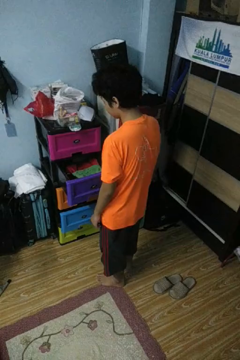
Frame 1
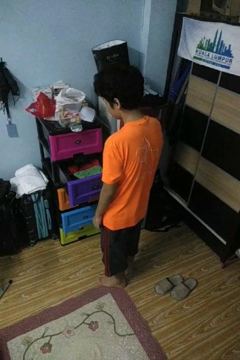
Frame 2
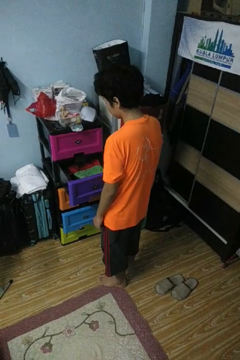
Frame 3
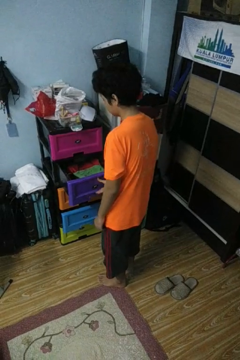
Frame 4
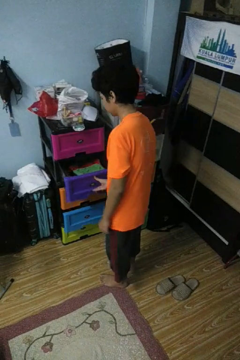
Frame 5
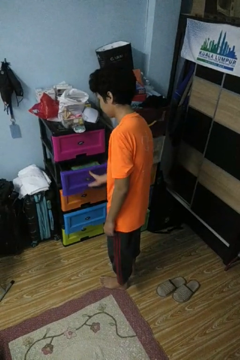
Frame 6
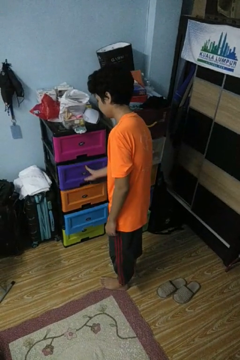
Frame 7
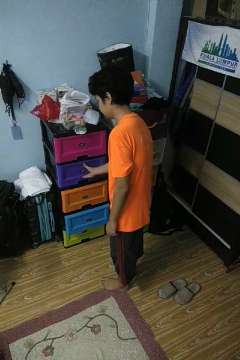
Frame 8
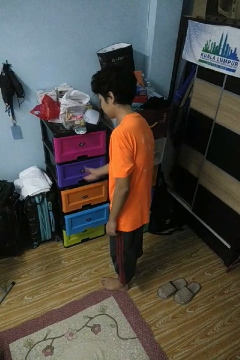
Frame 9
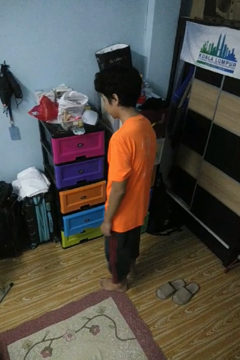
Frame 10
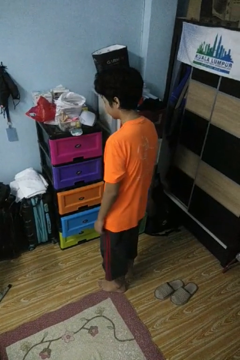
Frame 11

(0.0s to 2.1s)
person closes dresser drawer

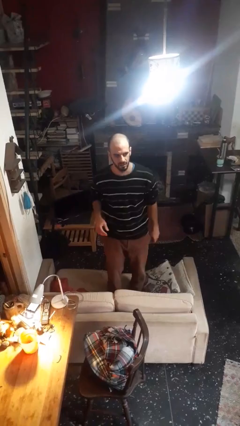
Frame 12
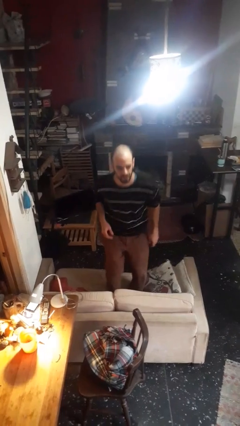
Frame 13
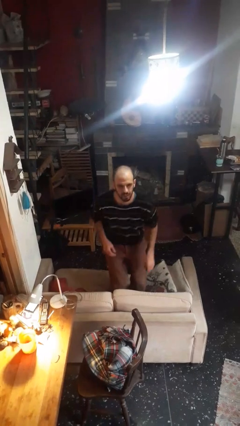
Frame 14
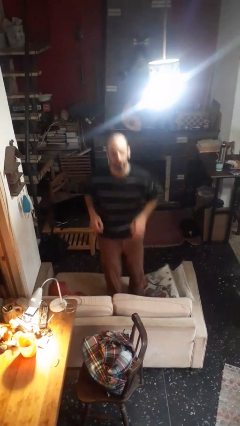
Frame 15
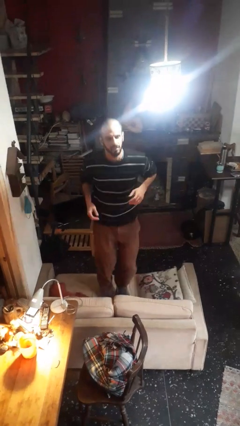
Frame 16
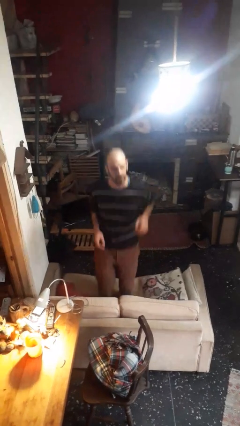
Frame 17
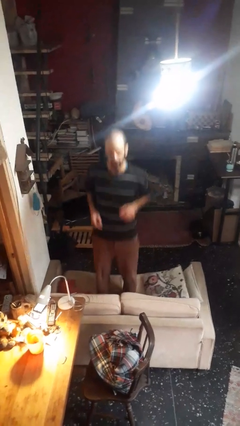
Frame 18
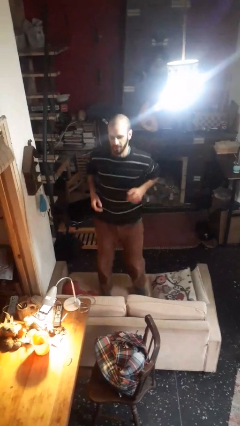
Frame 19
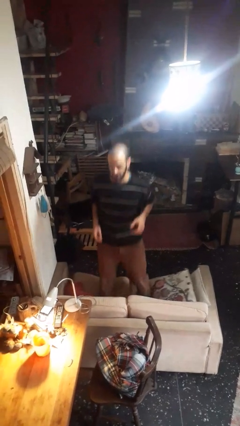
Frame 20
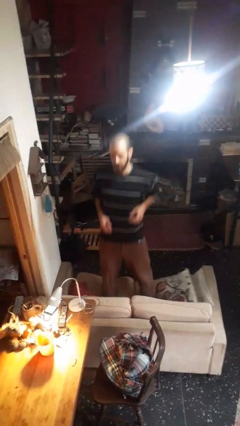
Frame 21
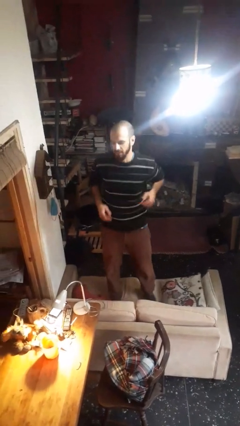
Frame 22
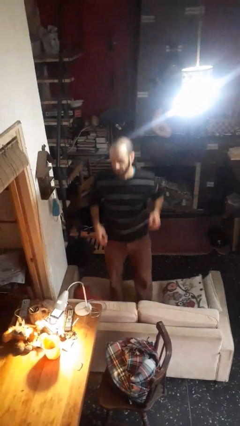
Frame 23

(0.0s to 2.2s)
person jumps on couch

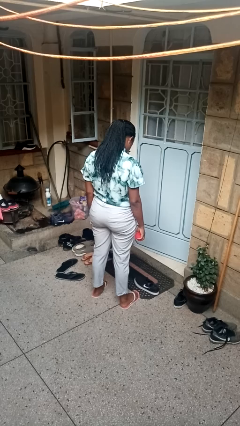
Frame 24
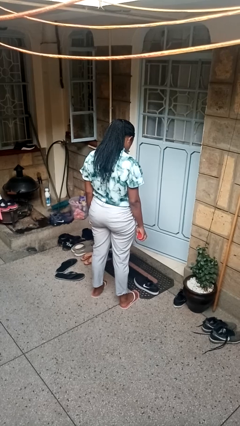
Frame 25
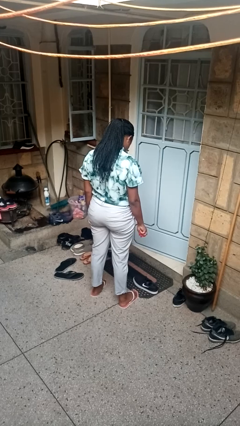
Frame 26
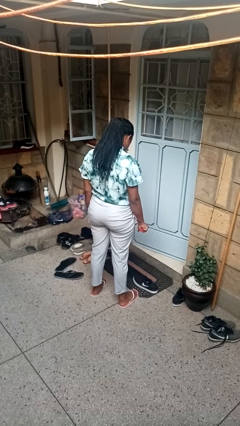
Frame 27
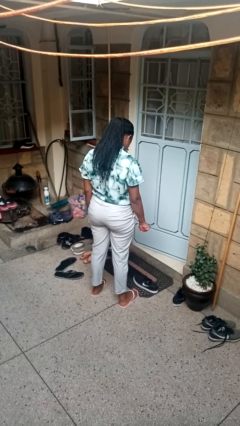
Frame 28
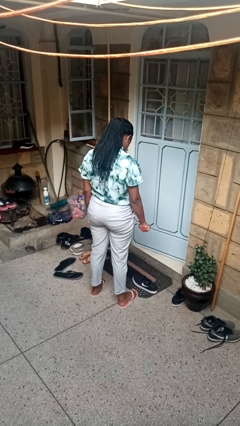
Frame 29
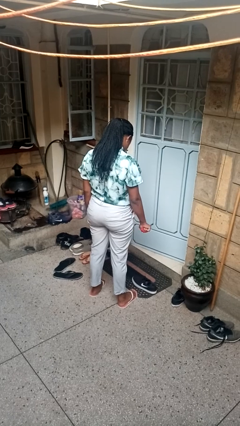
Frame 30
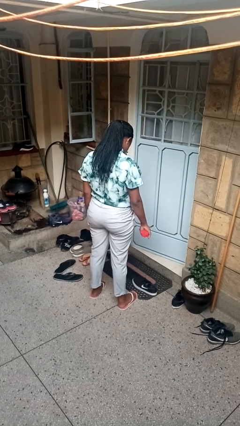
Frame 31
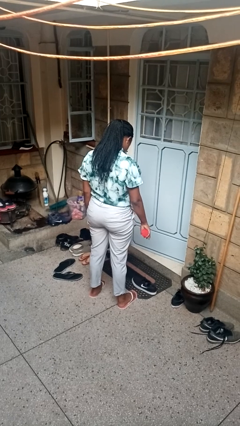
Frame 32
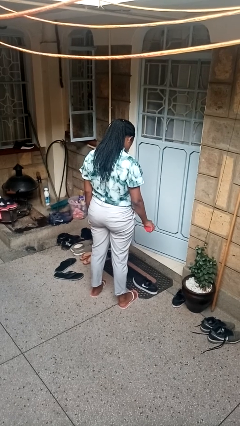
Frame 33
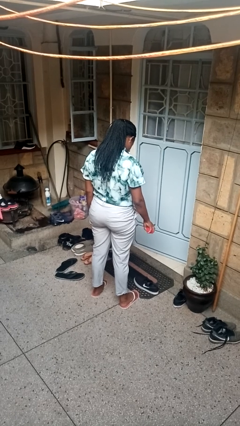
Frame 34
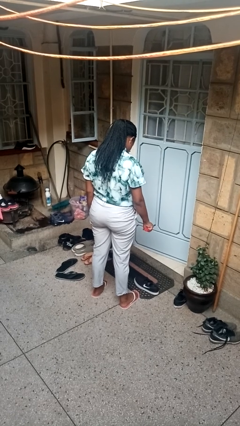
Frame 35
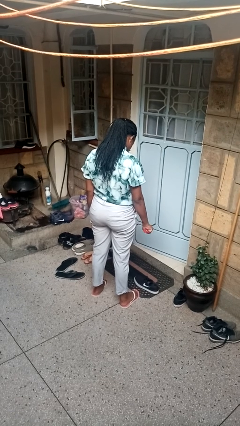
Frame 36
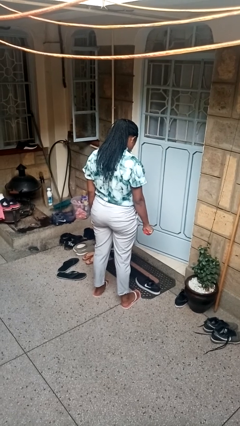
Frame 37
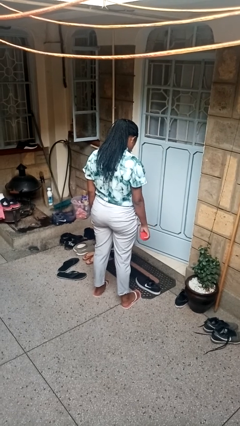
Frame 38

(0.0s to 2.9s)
person squeezes object

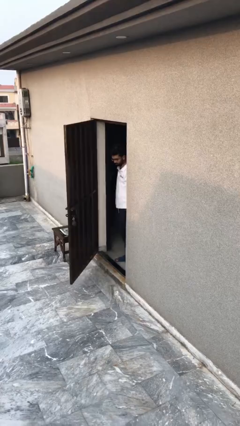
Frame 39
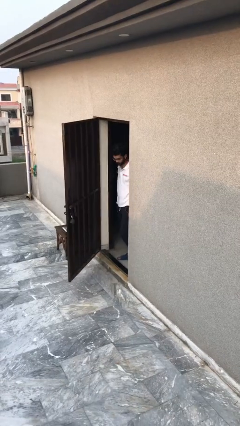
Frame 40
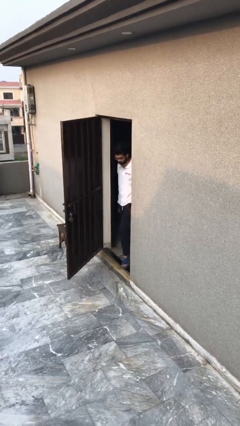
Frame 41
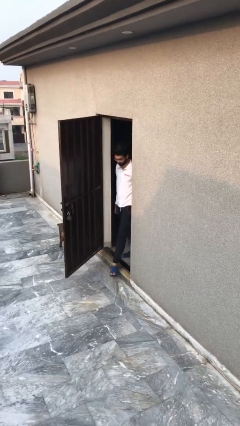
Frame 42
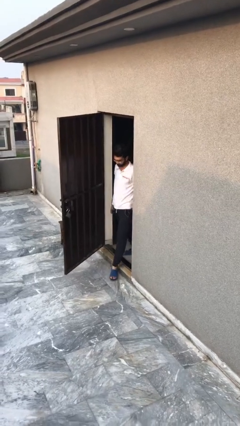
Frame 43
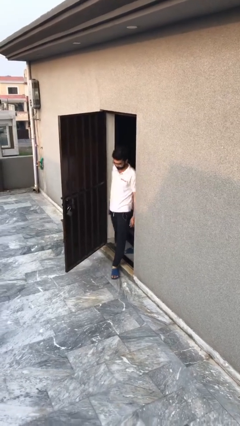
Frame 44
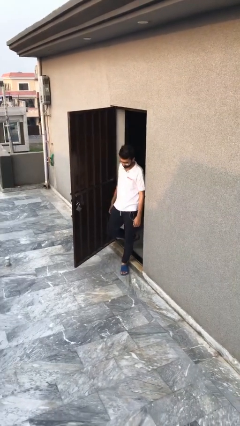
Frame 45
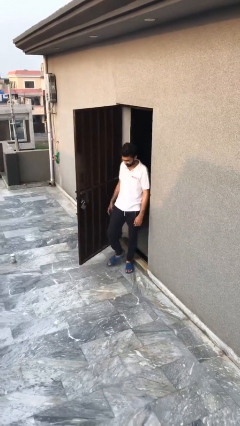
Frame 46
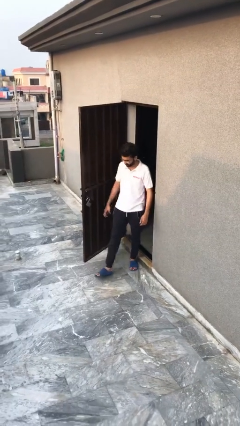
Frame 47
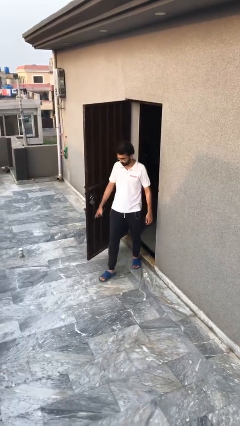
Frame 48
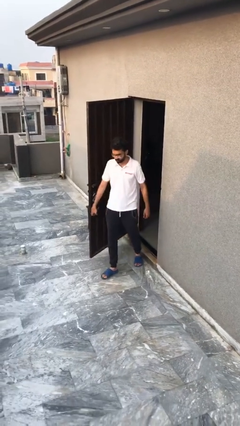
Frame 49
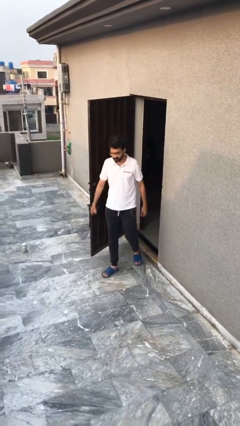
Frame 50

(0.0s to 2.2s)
person enters scene through structure

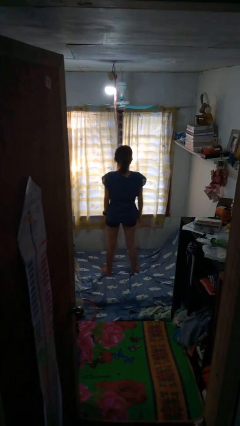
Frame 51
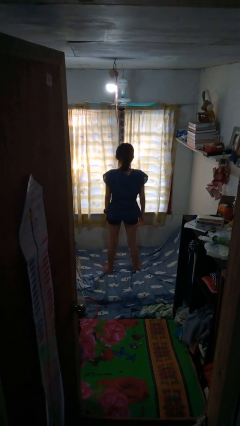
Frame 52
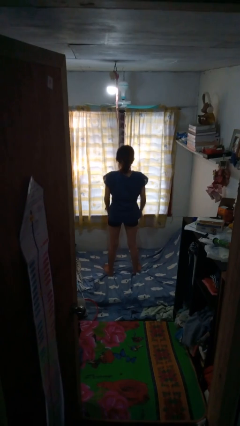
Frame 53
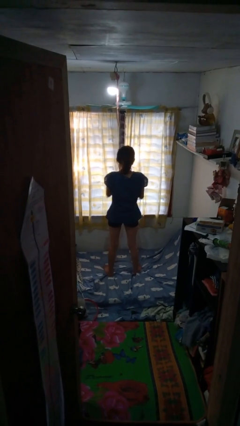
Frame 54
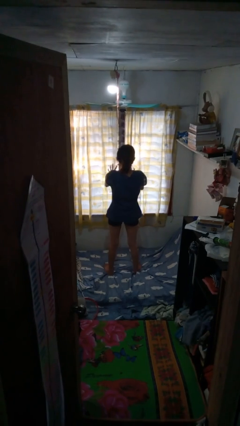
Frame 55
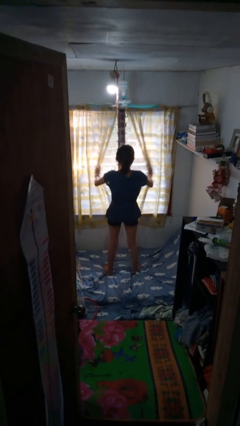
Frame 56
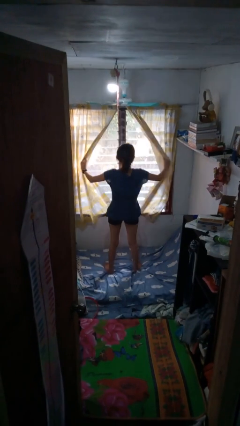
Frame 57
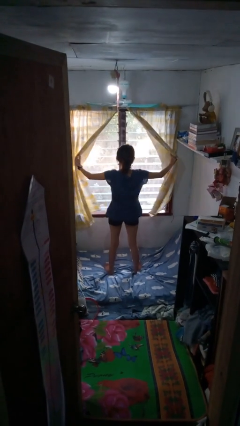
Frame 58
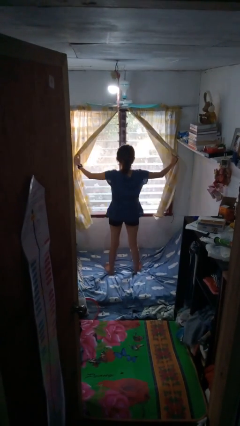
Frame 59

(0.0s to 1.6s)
person opens curtains

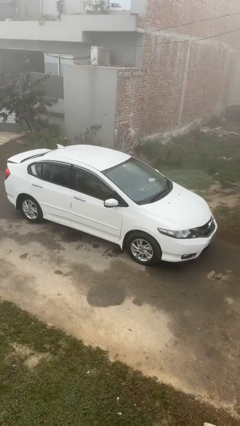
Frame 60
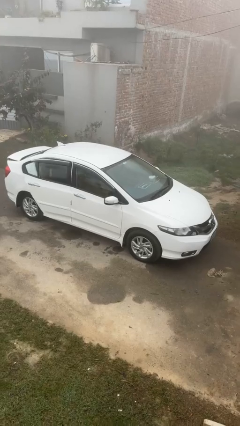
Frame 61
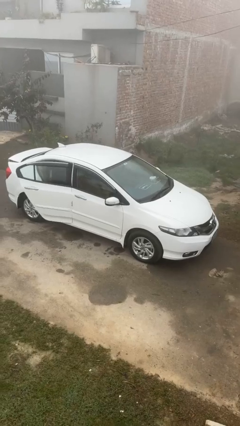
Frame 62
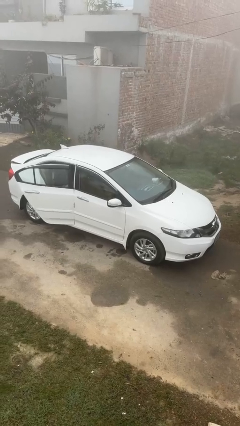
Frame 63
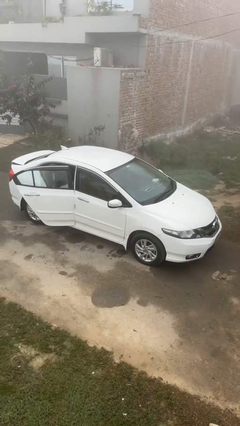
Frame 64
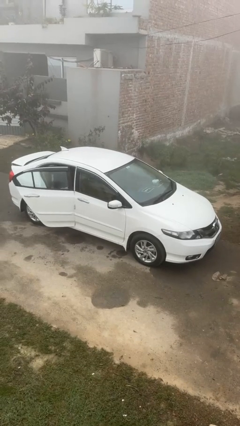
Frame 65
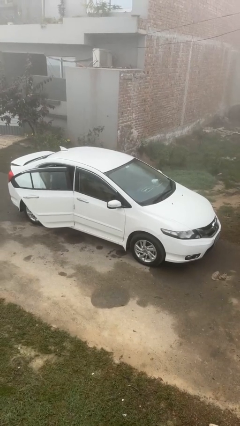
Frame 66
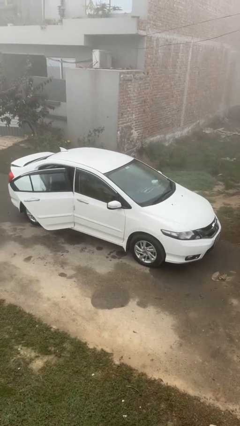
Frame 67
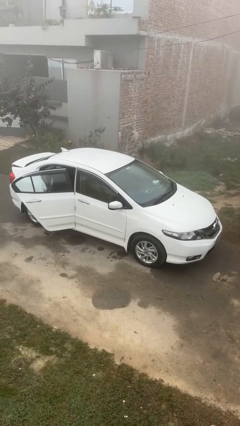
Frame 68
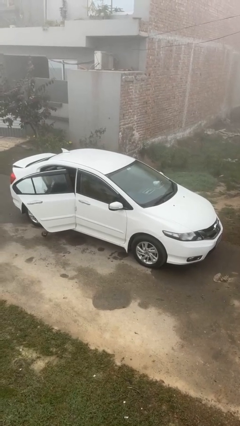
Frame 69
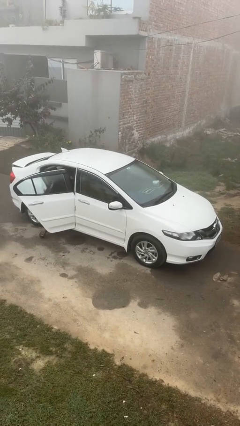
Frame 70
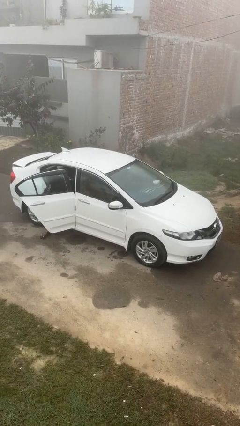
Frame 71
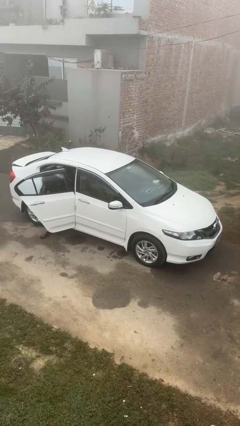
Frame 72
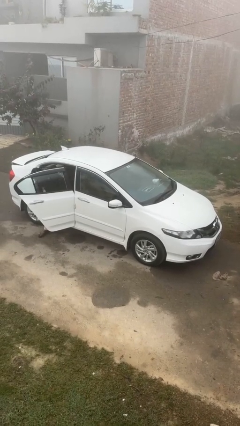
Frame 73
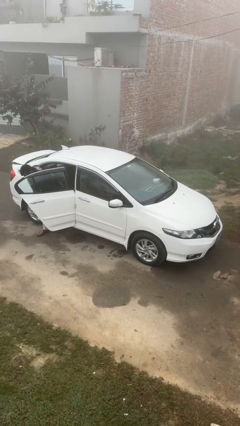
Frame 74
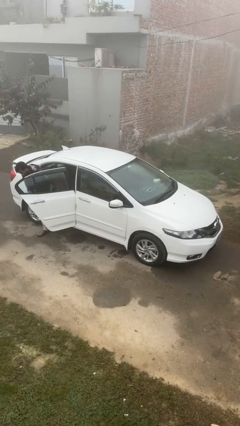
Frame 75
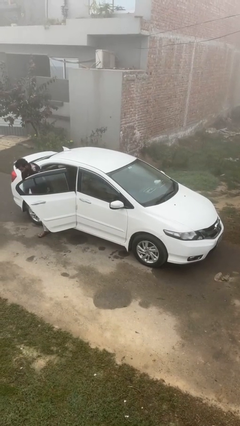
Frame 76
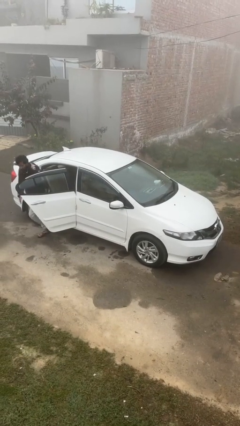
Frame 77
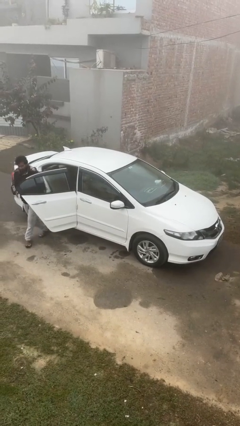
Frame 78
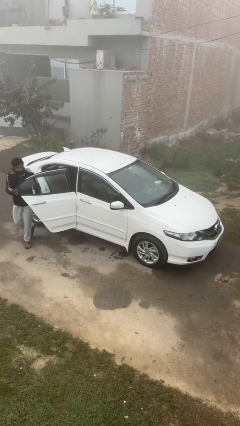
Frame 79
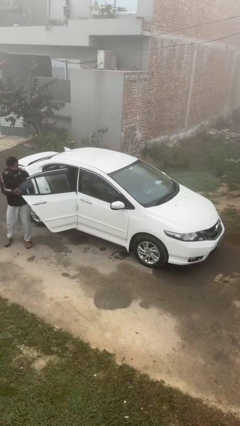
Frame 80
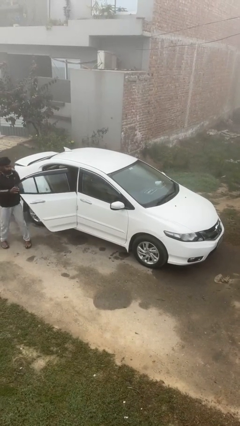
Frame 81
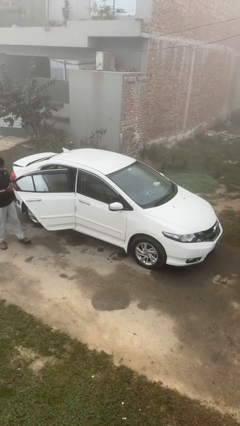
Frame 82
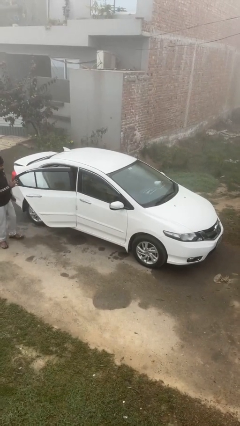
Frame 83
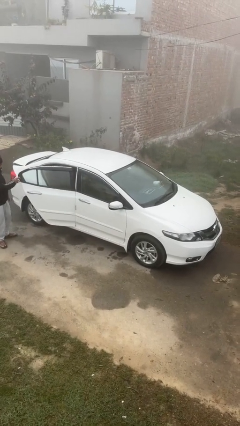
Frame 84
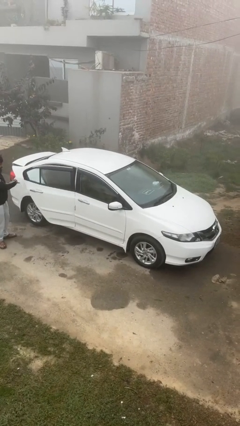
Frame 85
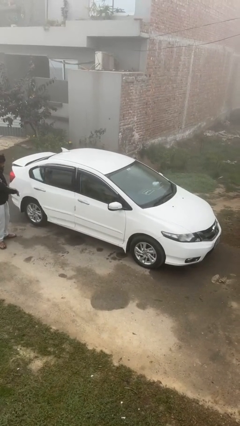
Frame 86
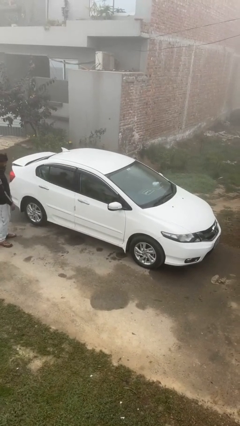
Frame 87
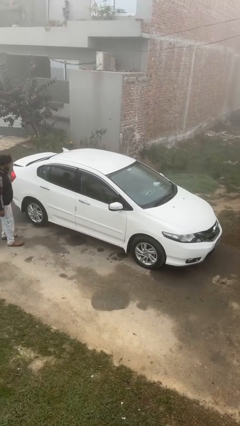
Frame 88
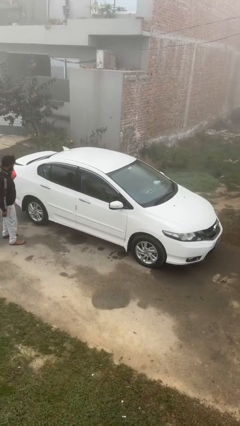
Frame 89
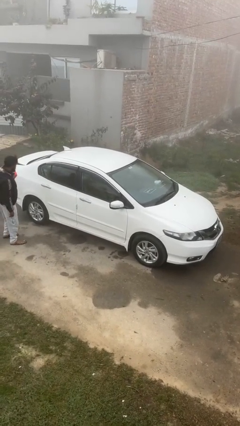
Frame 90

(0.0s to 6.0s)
car drops off person

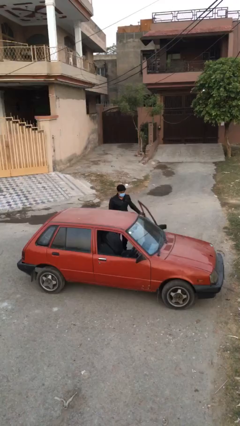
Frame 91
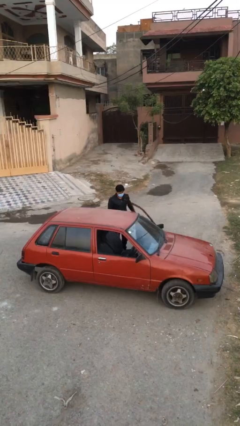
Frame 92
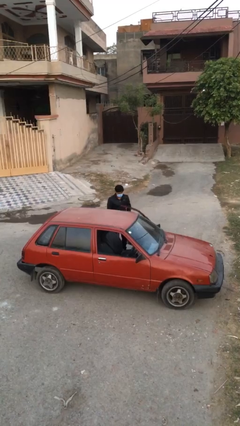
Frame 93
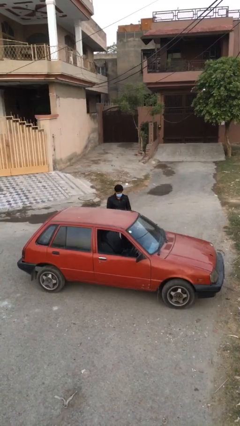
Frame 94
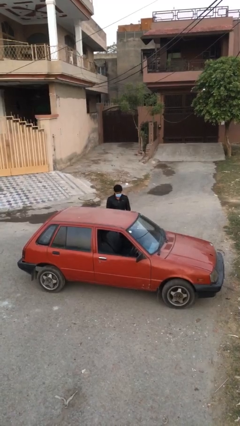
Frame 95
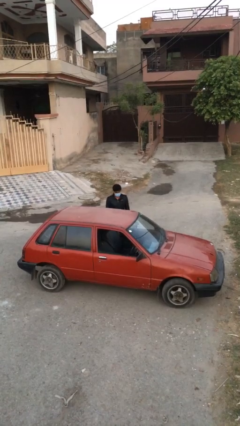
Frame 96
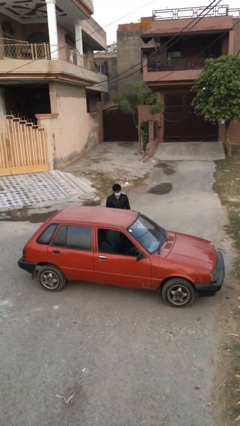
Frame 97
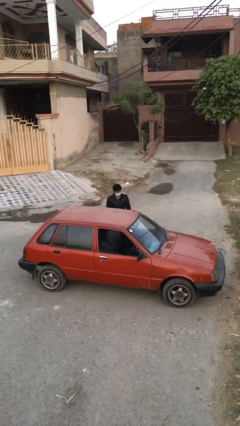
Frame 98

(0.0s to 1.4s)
person closes car door
